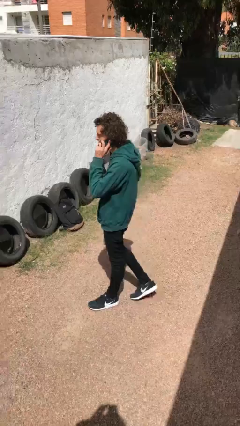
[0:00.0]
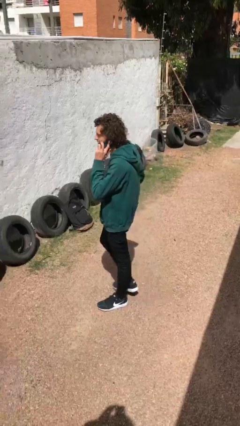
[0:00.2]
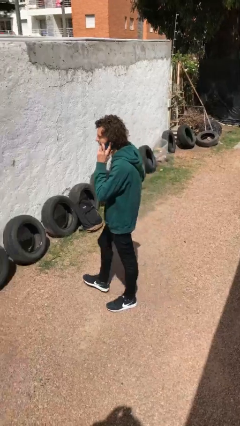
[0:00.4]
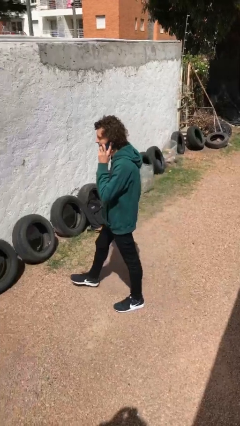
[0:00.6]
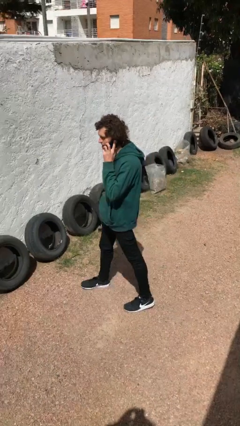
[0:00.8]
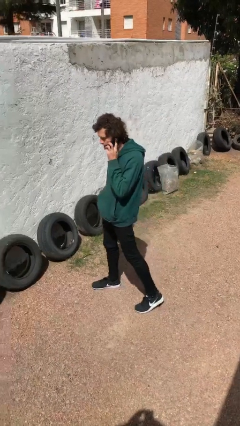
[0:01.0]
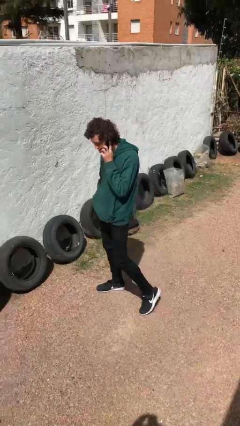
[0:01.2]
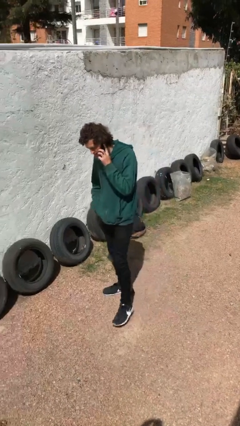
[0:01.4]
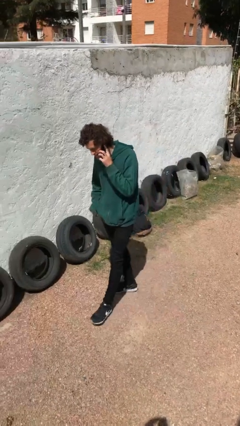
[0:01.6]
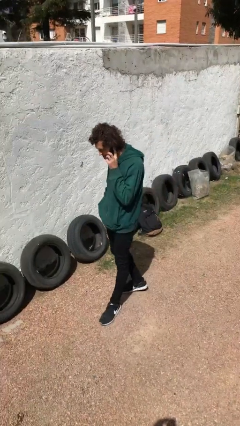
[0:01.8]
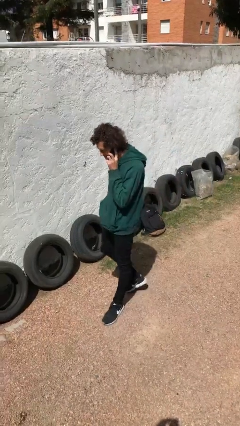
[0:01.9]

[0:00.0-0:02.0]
person talks on phone

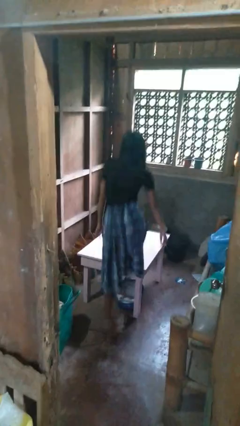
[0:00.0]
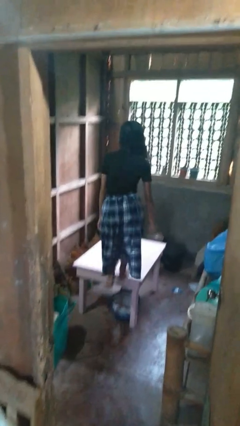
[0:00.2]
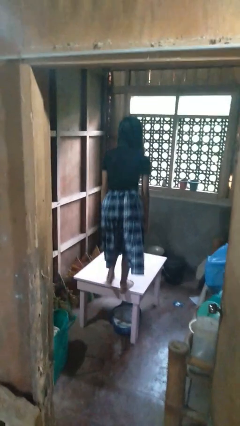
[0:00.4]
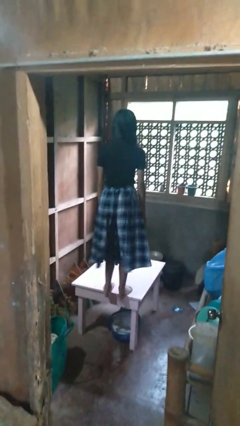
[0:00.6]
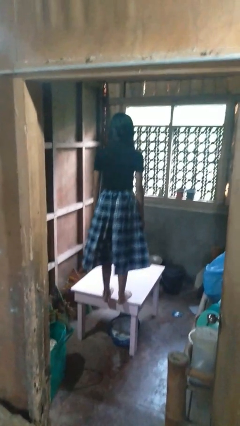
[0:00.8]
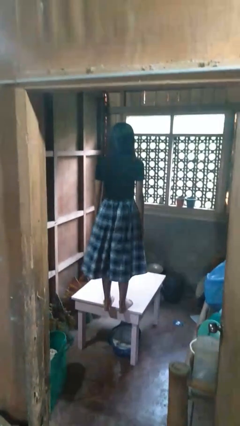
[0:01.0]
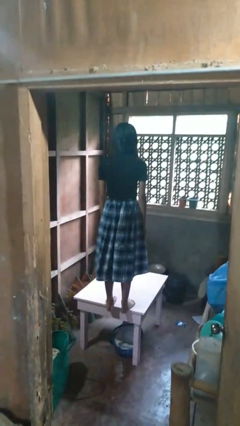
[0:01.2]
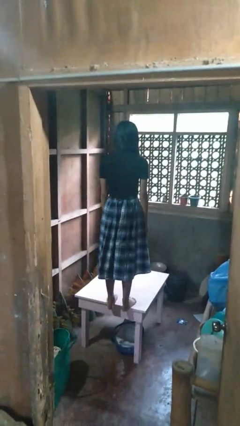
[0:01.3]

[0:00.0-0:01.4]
person climbs on table

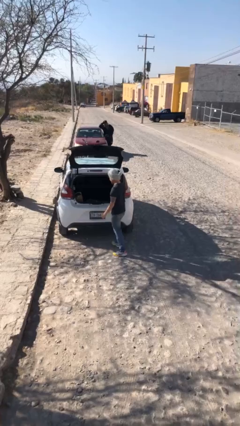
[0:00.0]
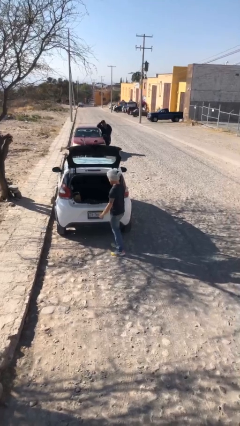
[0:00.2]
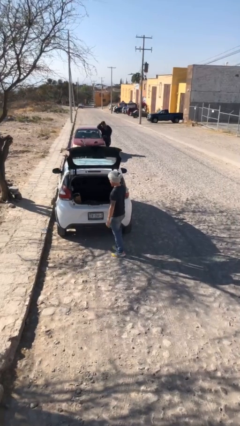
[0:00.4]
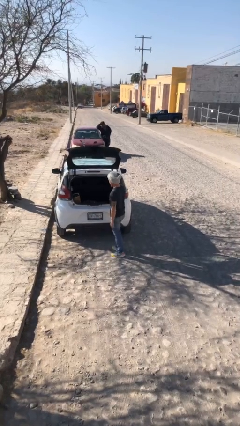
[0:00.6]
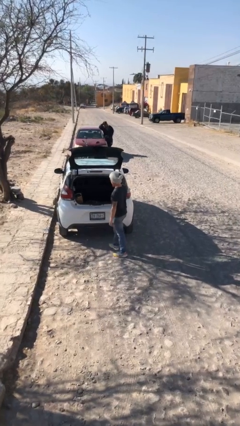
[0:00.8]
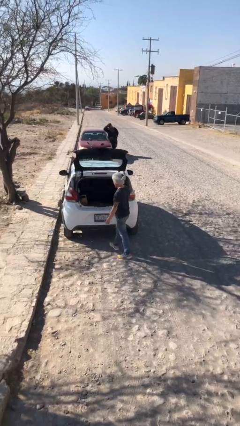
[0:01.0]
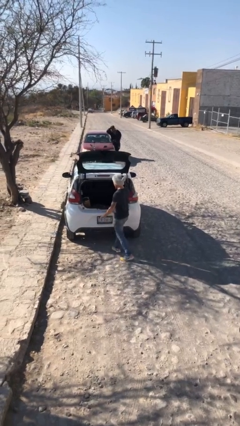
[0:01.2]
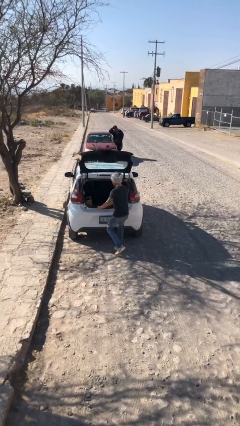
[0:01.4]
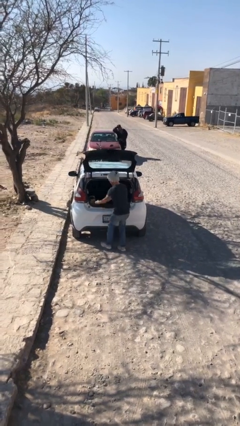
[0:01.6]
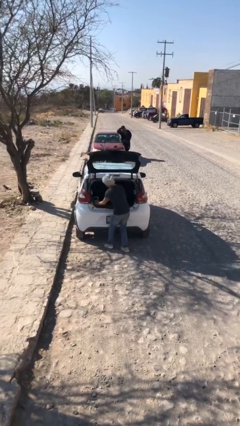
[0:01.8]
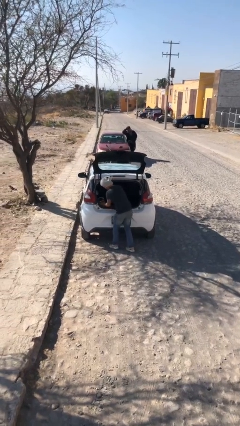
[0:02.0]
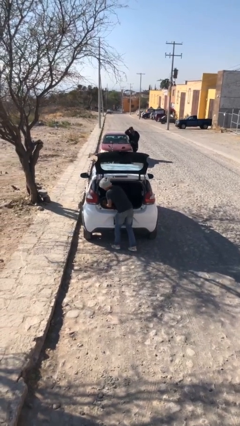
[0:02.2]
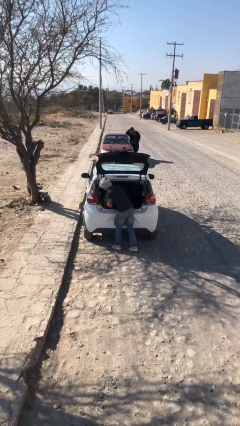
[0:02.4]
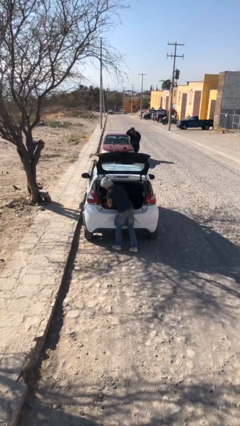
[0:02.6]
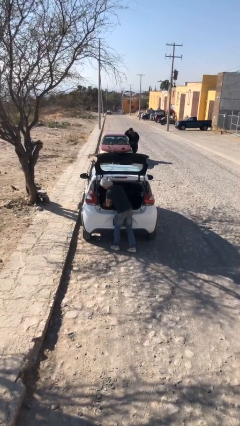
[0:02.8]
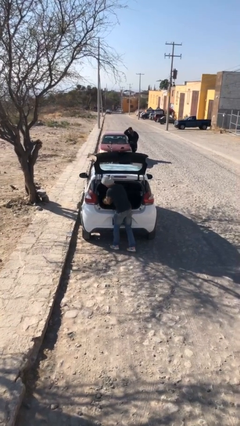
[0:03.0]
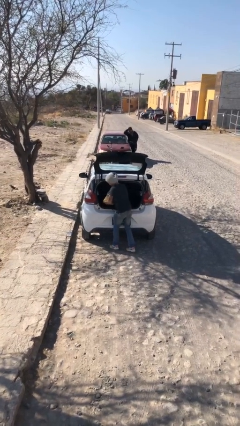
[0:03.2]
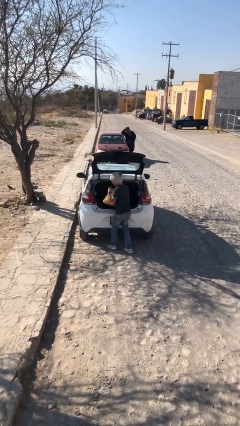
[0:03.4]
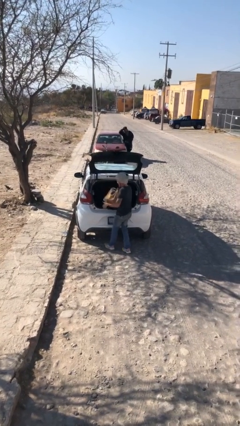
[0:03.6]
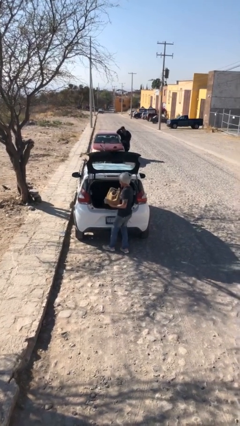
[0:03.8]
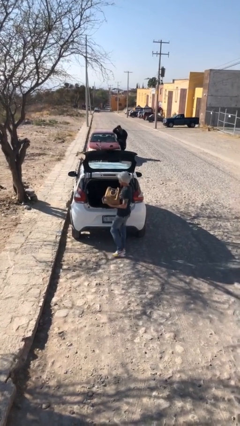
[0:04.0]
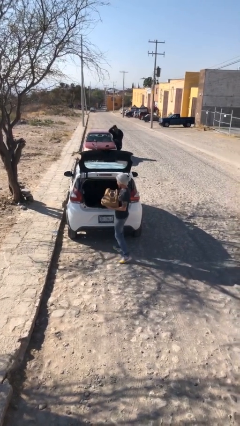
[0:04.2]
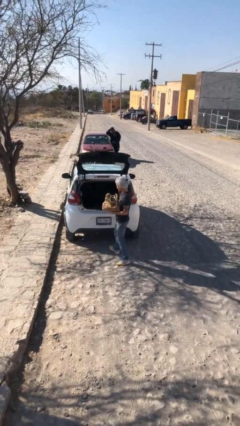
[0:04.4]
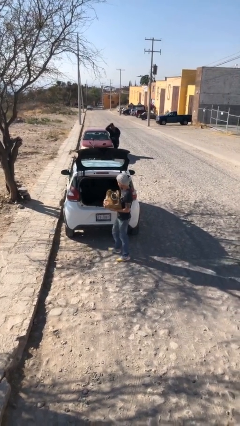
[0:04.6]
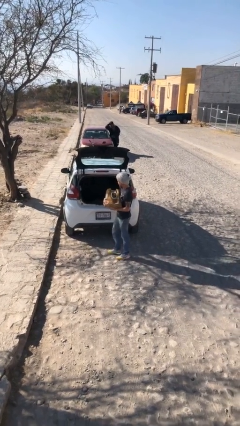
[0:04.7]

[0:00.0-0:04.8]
person unloads car

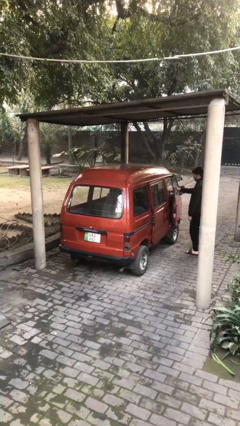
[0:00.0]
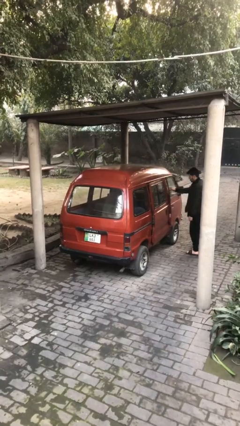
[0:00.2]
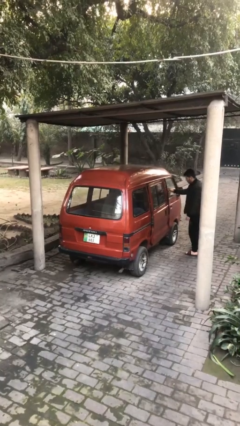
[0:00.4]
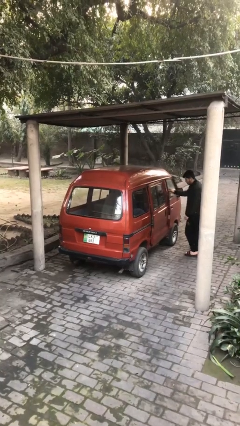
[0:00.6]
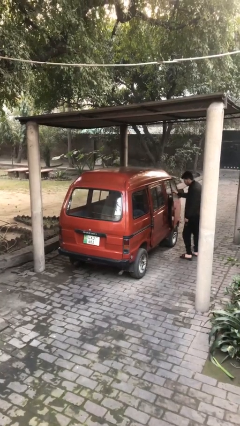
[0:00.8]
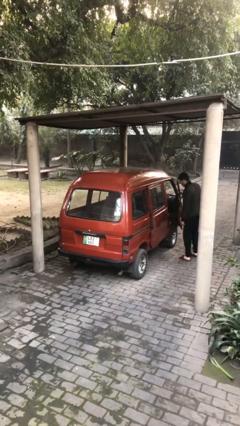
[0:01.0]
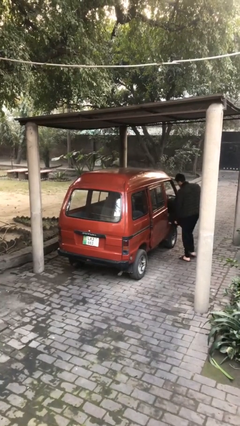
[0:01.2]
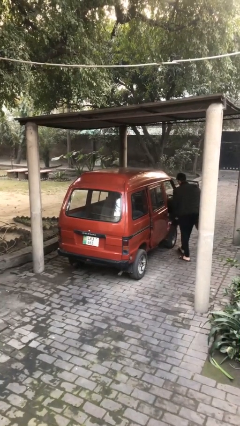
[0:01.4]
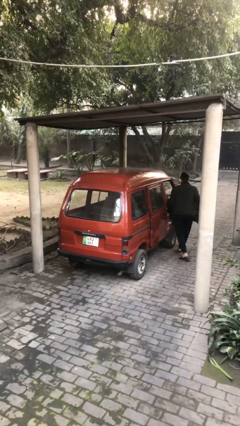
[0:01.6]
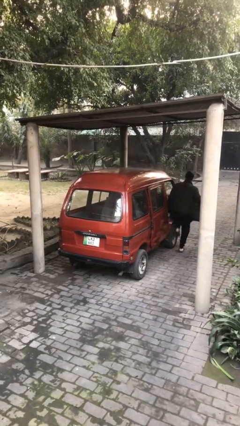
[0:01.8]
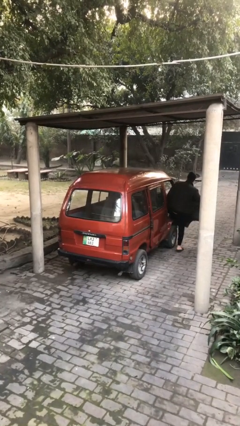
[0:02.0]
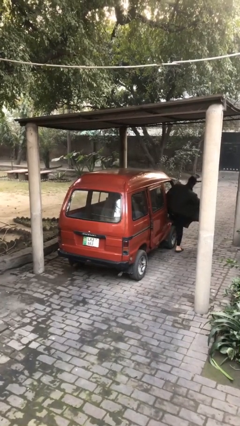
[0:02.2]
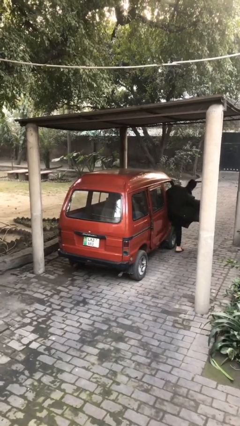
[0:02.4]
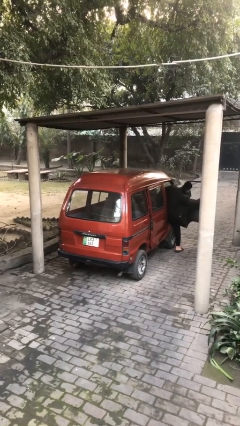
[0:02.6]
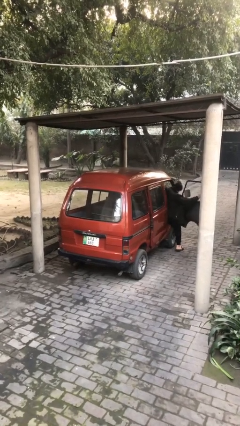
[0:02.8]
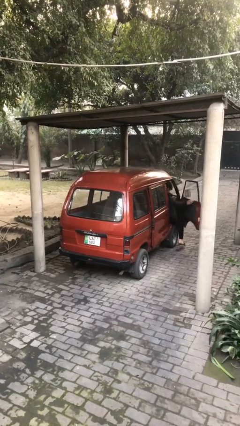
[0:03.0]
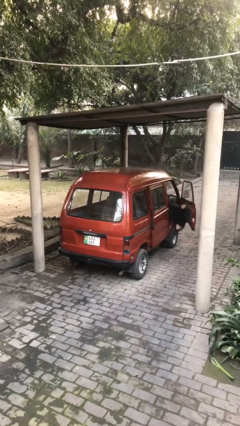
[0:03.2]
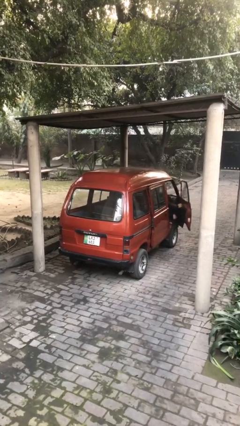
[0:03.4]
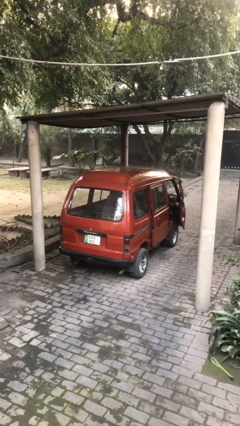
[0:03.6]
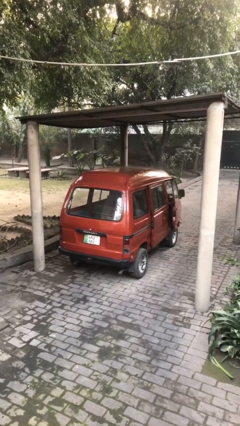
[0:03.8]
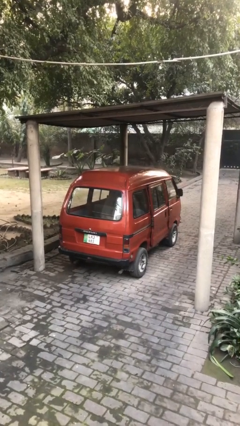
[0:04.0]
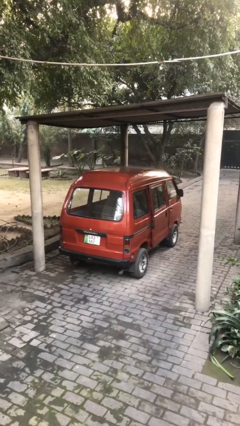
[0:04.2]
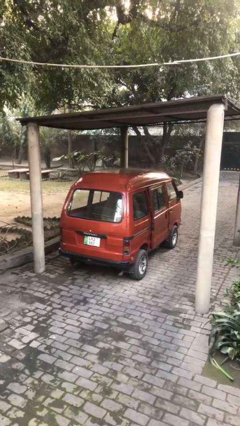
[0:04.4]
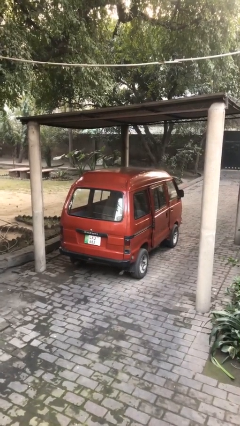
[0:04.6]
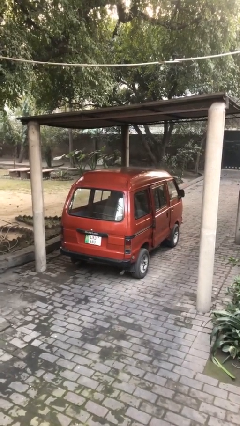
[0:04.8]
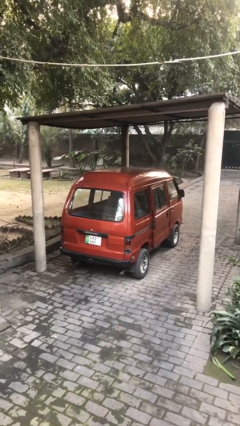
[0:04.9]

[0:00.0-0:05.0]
car picks up person

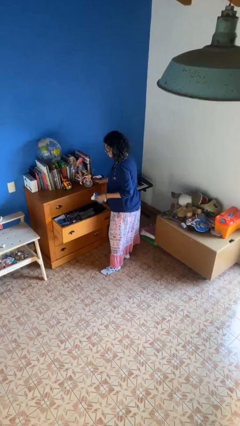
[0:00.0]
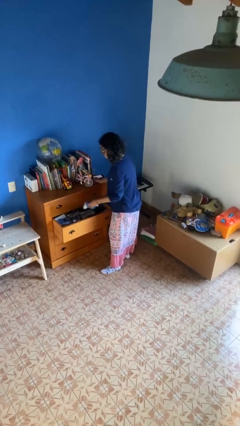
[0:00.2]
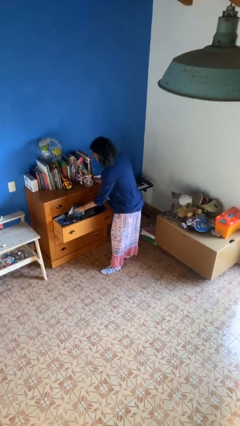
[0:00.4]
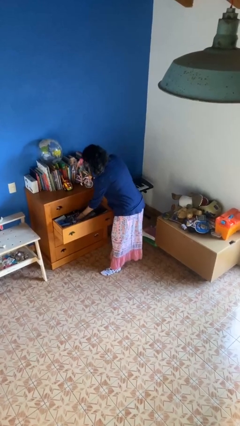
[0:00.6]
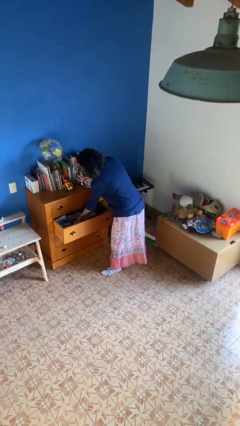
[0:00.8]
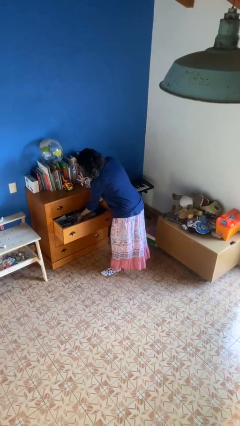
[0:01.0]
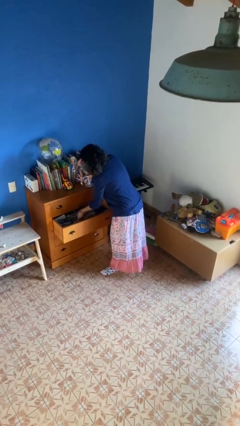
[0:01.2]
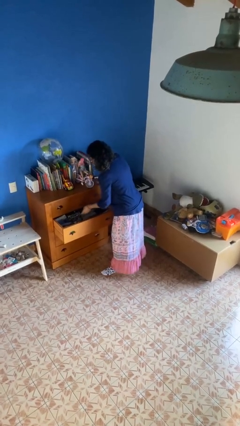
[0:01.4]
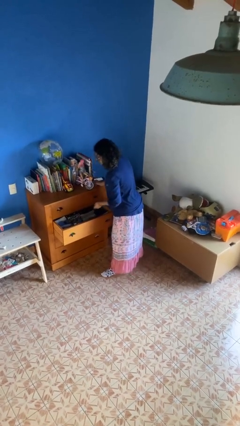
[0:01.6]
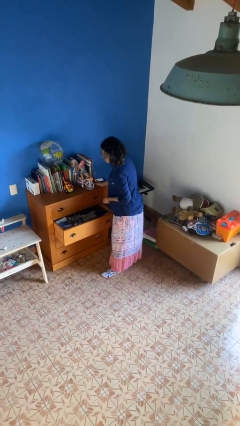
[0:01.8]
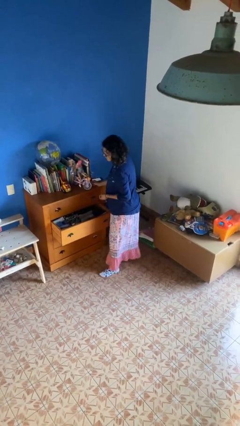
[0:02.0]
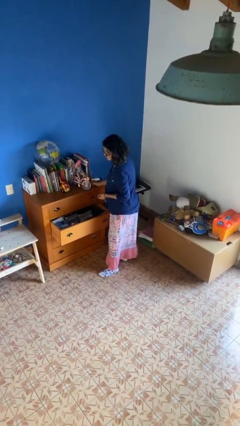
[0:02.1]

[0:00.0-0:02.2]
person puts clothes into dresser

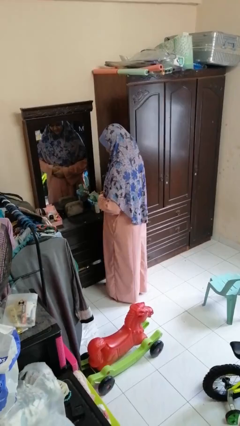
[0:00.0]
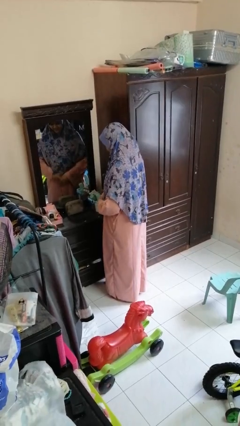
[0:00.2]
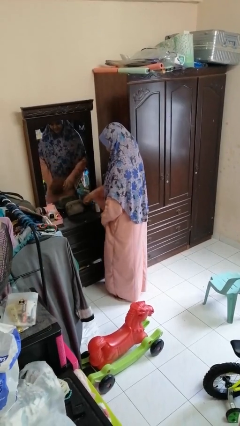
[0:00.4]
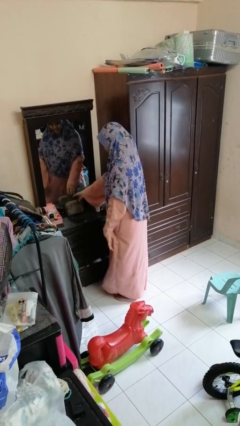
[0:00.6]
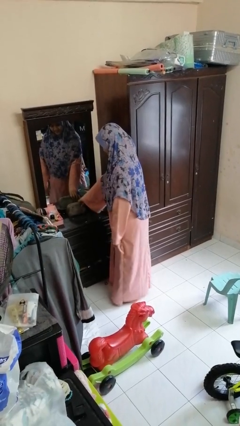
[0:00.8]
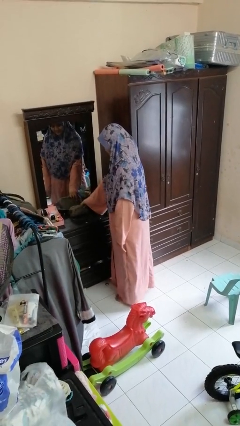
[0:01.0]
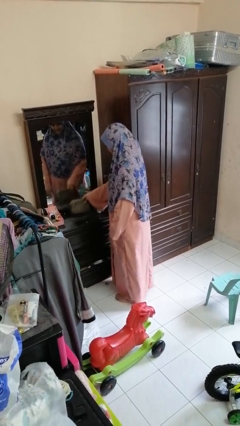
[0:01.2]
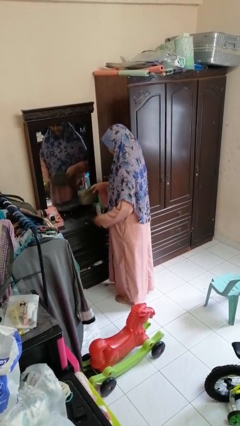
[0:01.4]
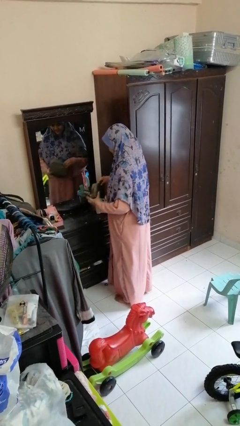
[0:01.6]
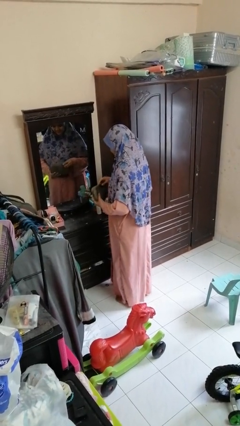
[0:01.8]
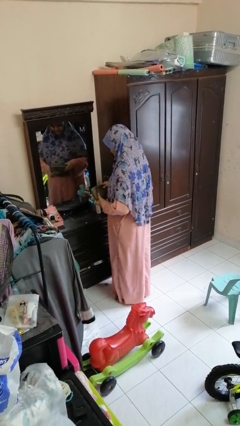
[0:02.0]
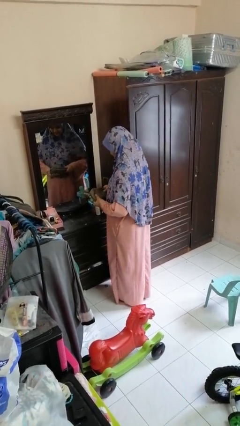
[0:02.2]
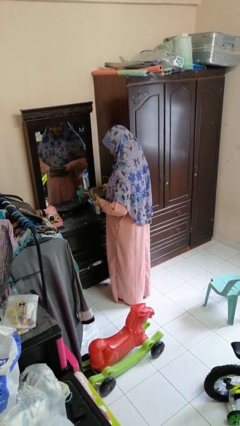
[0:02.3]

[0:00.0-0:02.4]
person picks up object from countertop
